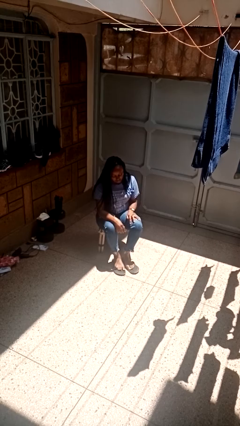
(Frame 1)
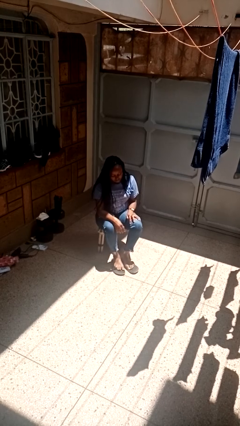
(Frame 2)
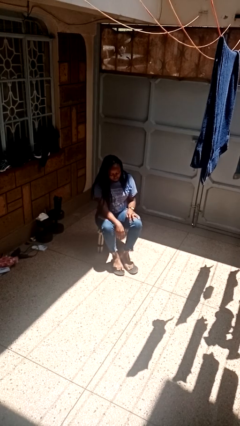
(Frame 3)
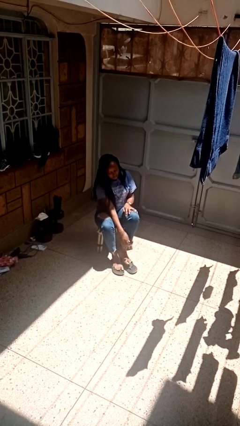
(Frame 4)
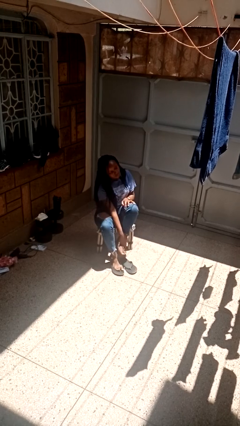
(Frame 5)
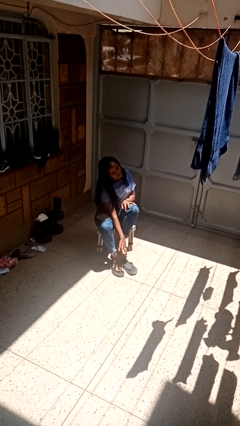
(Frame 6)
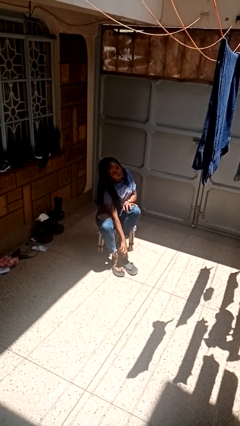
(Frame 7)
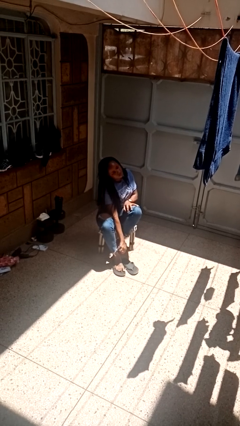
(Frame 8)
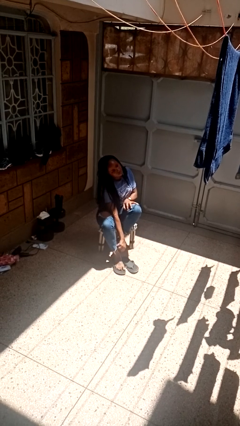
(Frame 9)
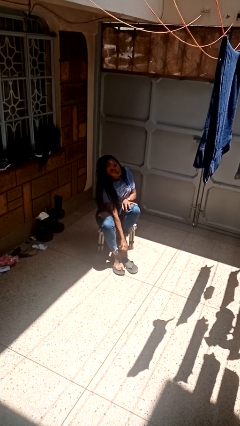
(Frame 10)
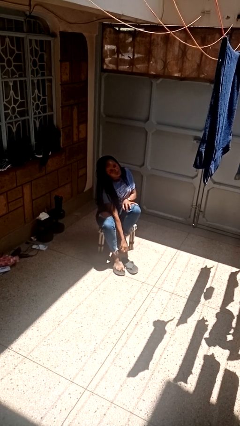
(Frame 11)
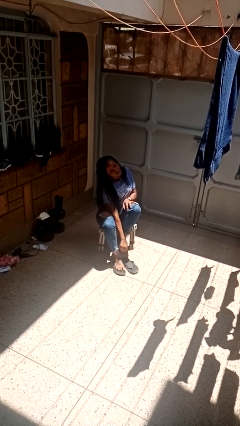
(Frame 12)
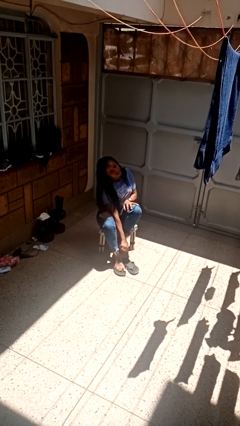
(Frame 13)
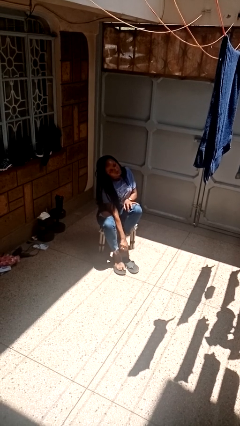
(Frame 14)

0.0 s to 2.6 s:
person rubs foot

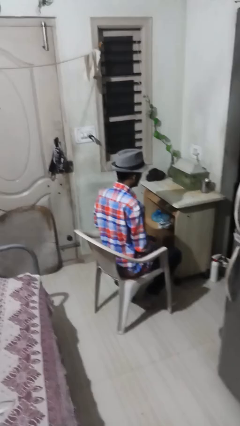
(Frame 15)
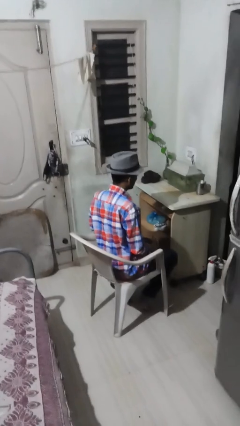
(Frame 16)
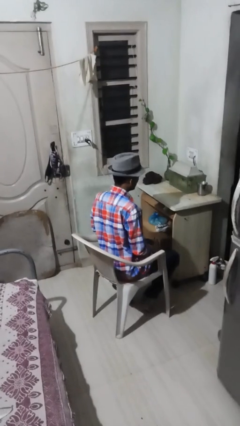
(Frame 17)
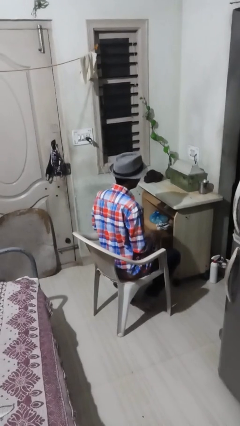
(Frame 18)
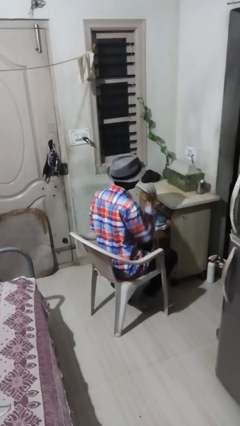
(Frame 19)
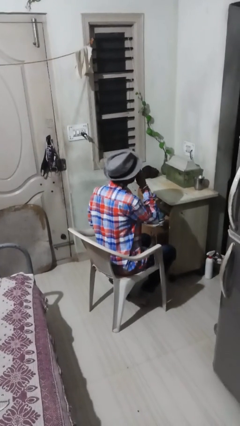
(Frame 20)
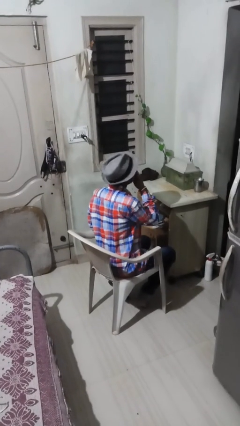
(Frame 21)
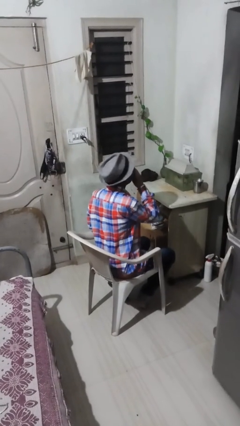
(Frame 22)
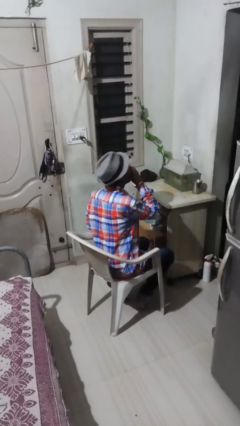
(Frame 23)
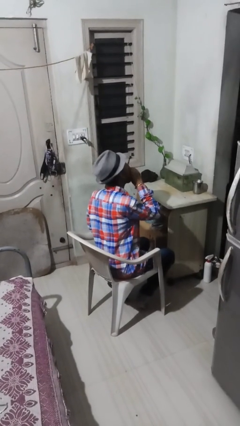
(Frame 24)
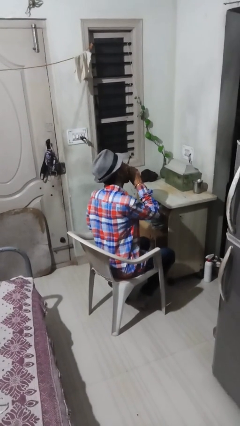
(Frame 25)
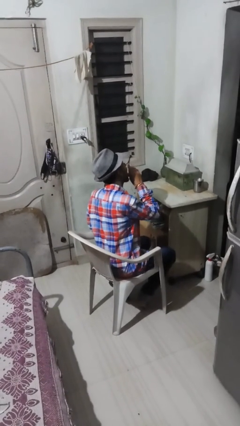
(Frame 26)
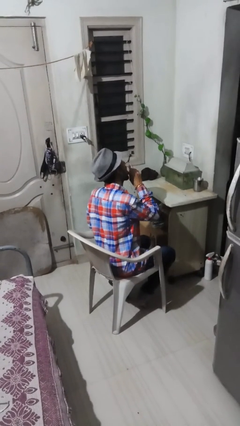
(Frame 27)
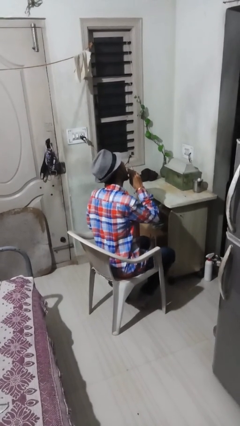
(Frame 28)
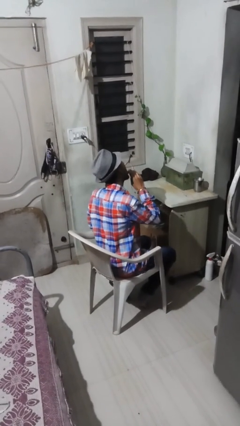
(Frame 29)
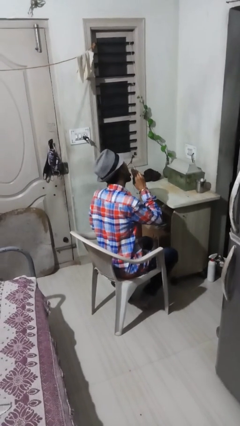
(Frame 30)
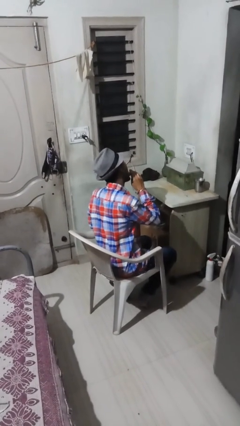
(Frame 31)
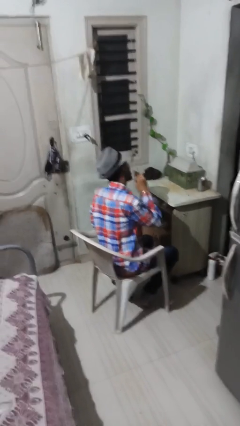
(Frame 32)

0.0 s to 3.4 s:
person licks fingers

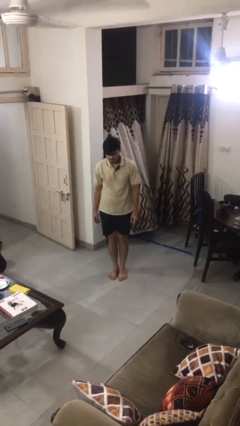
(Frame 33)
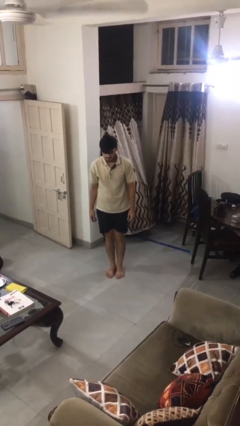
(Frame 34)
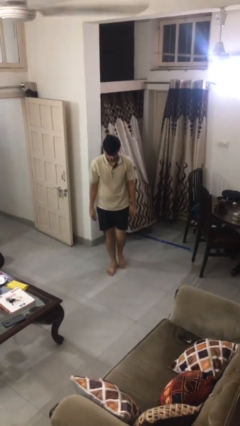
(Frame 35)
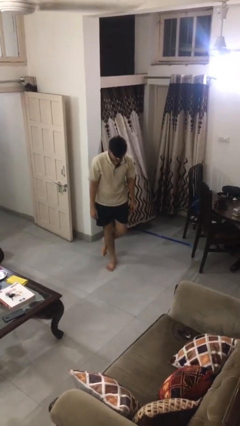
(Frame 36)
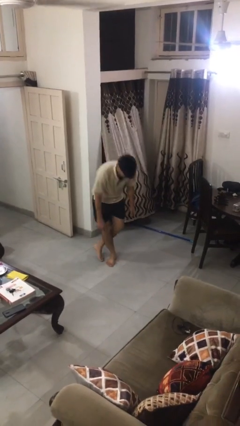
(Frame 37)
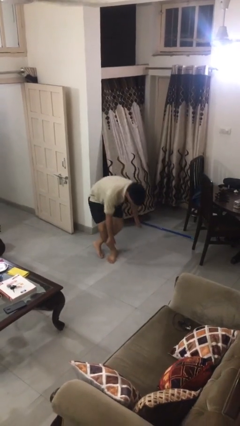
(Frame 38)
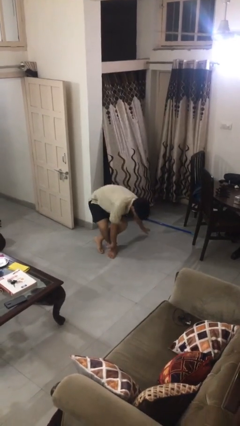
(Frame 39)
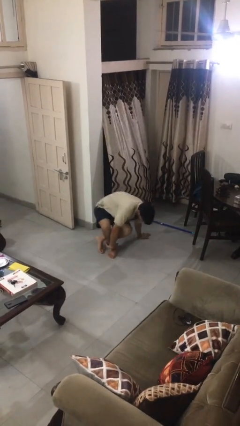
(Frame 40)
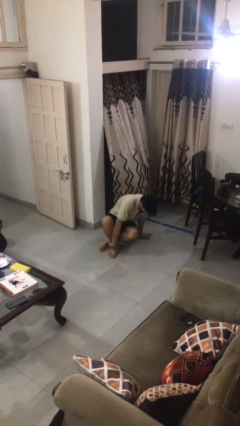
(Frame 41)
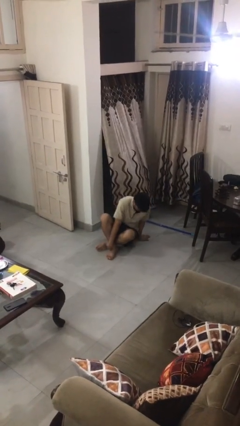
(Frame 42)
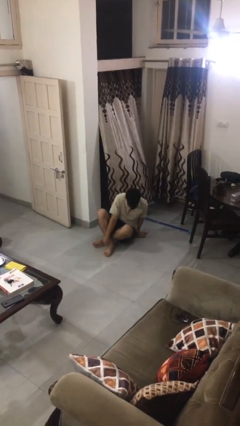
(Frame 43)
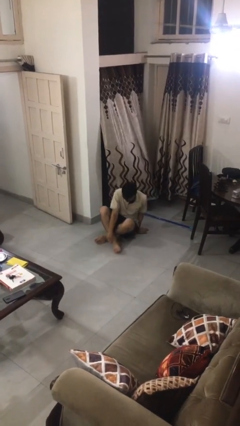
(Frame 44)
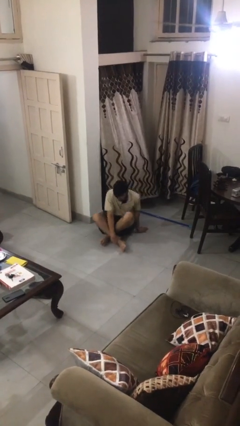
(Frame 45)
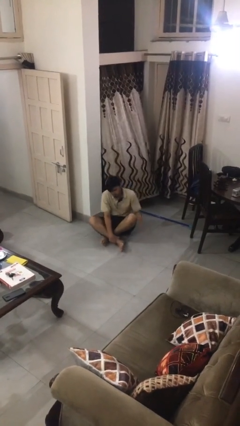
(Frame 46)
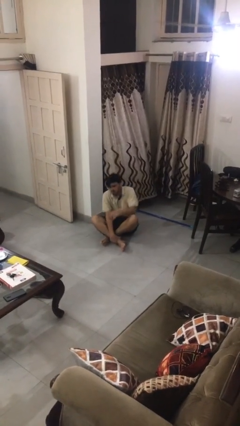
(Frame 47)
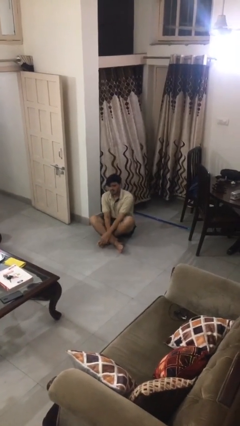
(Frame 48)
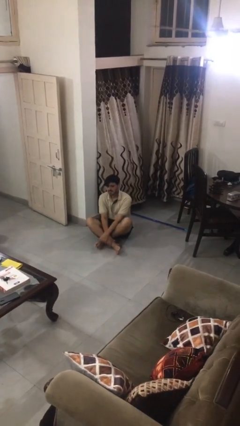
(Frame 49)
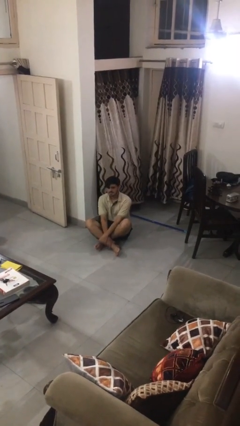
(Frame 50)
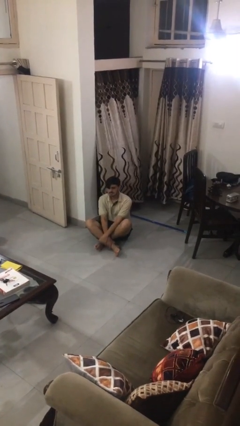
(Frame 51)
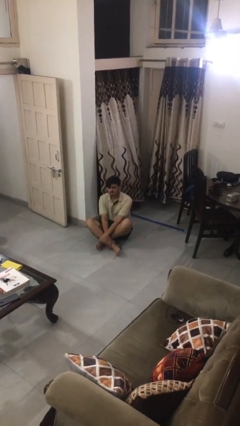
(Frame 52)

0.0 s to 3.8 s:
person sits crisscross

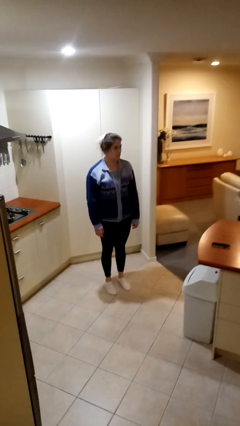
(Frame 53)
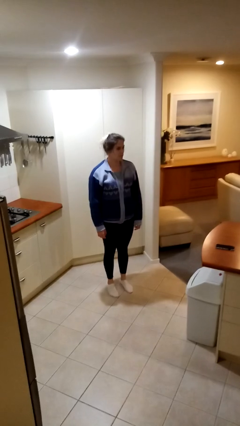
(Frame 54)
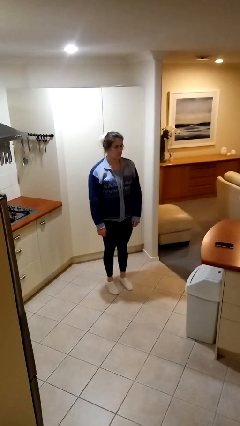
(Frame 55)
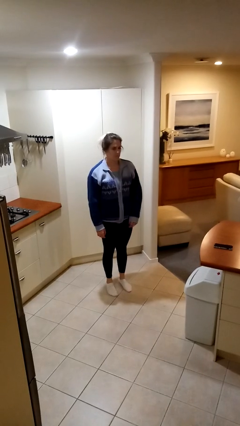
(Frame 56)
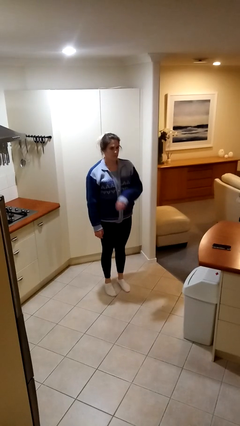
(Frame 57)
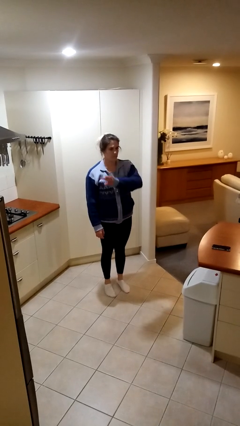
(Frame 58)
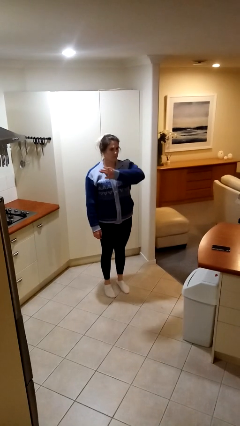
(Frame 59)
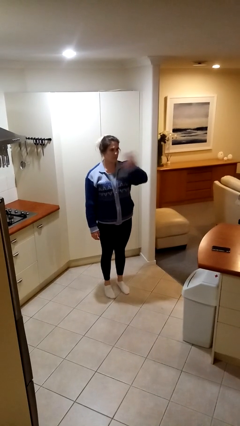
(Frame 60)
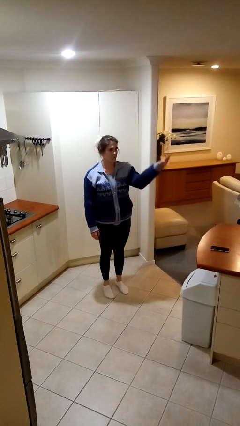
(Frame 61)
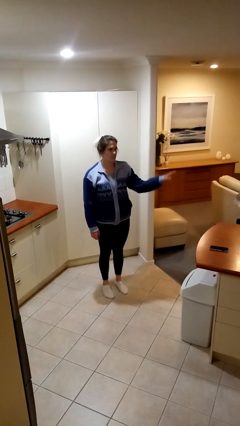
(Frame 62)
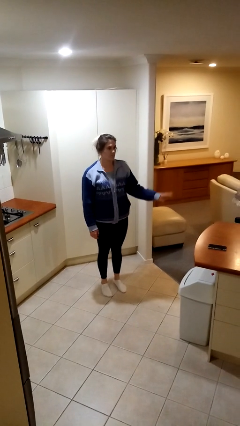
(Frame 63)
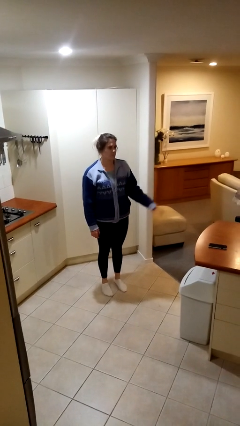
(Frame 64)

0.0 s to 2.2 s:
person gestures swipe left

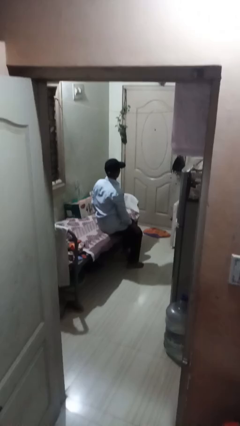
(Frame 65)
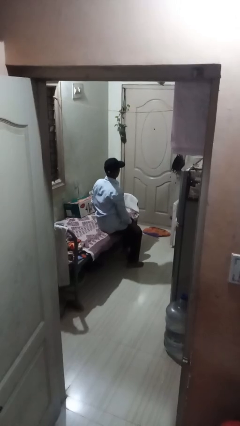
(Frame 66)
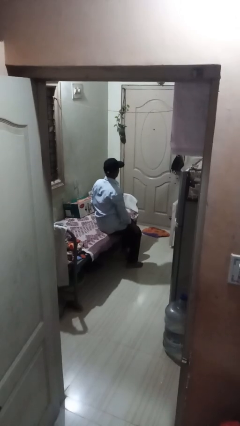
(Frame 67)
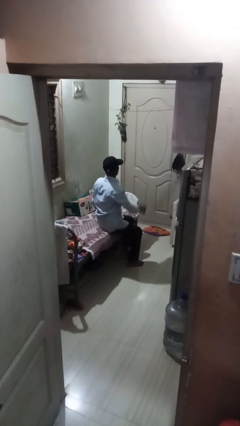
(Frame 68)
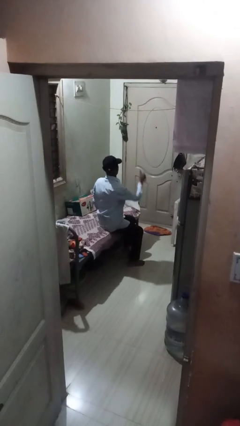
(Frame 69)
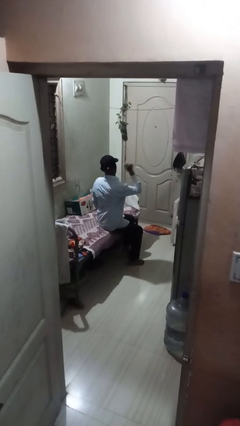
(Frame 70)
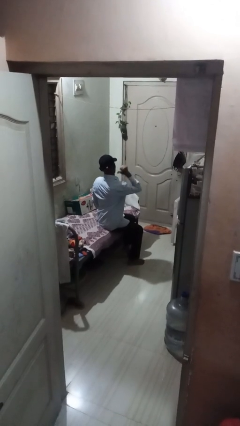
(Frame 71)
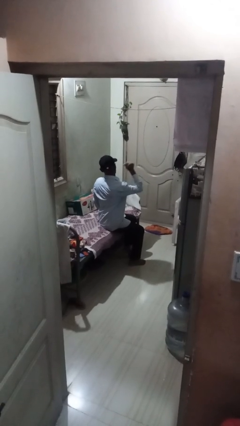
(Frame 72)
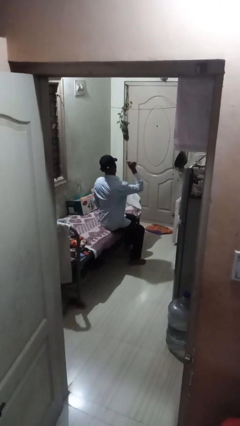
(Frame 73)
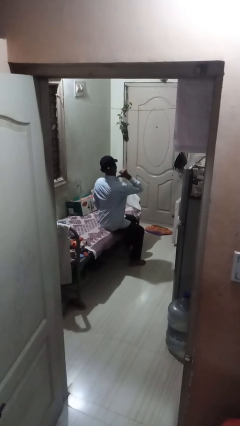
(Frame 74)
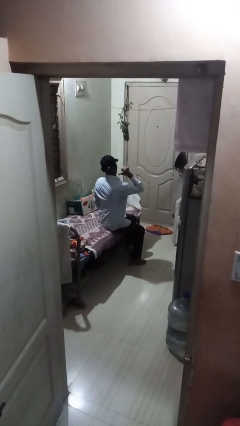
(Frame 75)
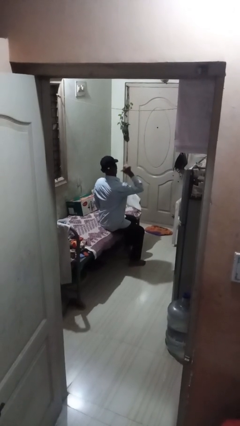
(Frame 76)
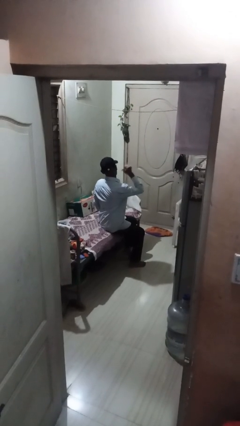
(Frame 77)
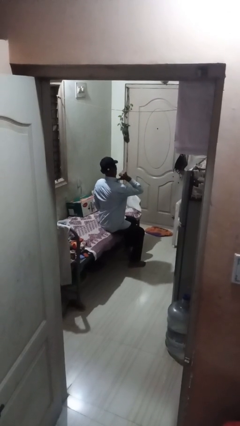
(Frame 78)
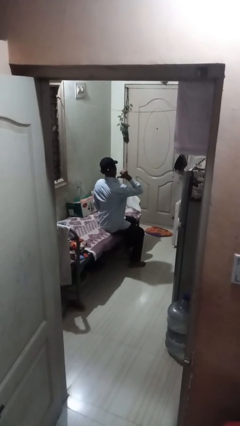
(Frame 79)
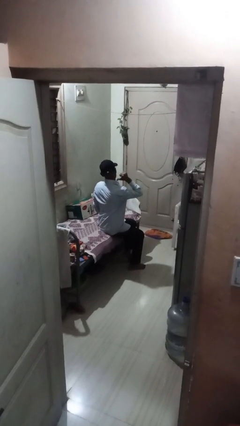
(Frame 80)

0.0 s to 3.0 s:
person gestures behind me

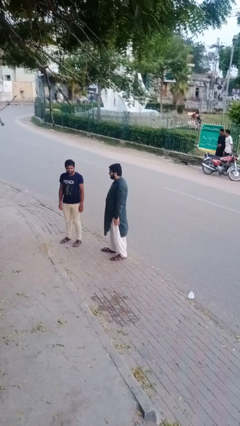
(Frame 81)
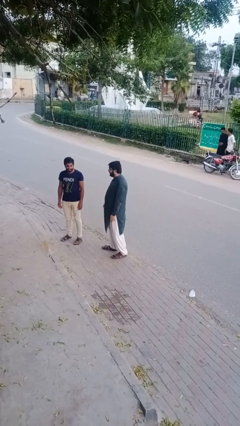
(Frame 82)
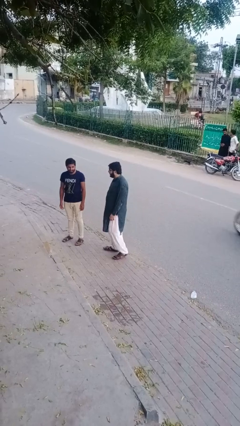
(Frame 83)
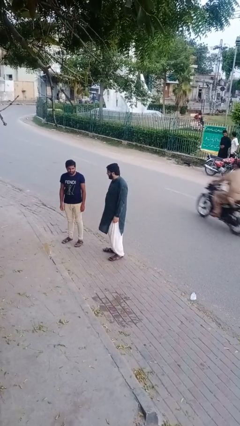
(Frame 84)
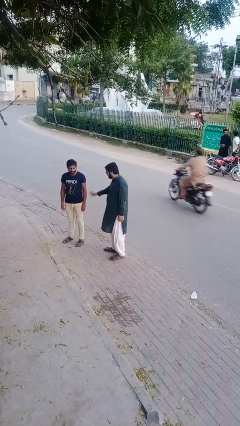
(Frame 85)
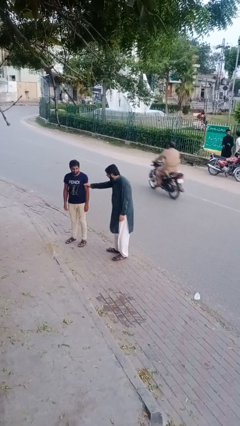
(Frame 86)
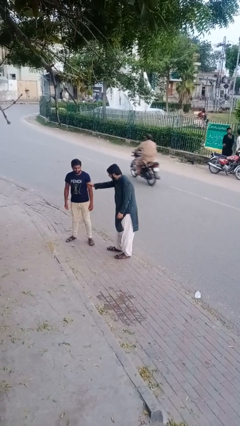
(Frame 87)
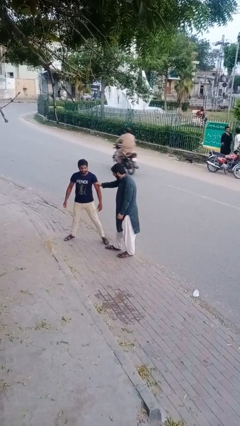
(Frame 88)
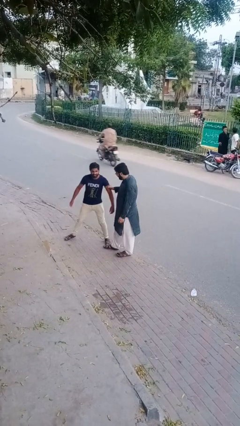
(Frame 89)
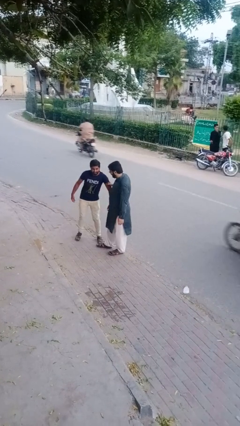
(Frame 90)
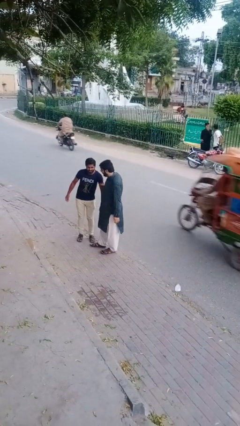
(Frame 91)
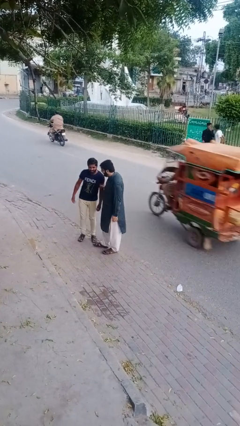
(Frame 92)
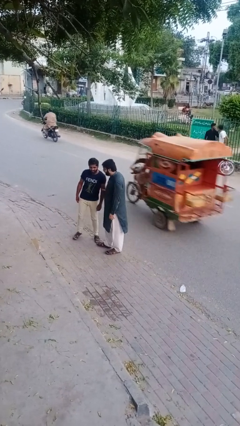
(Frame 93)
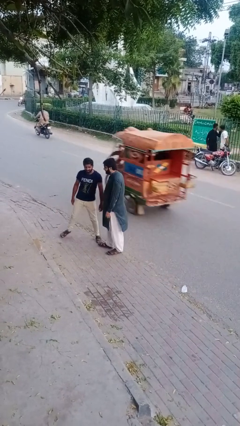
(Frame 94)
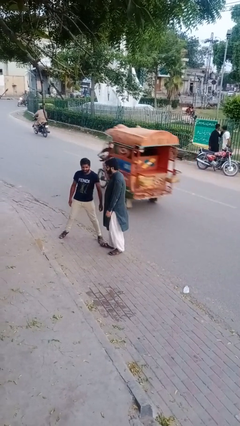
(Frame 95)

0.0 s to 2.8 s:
person grabs person by bicep
